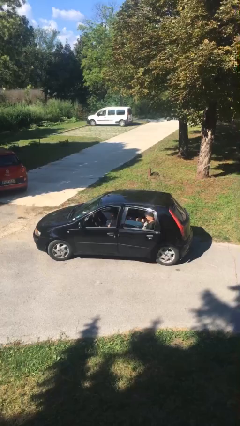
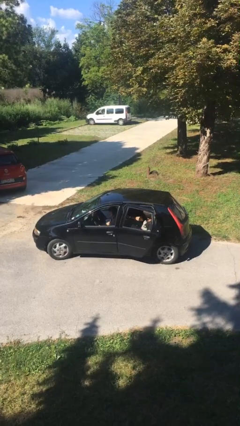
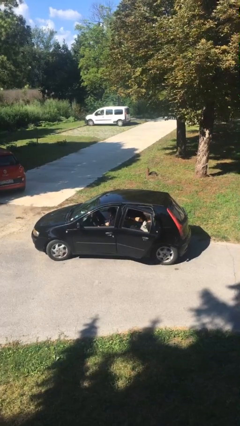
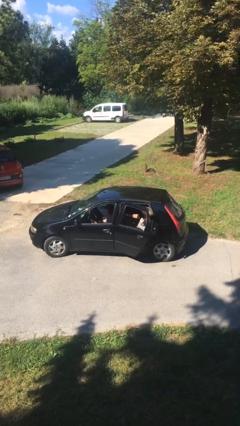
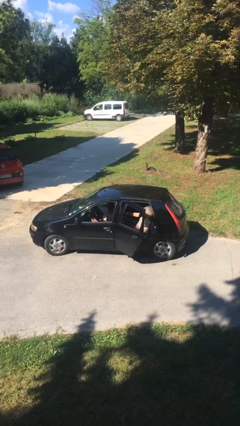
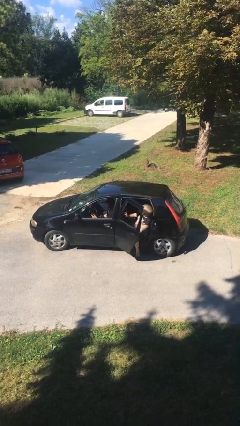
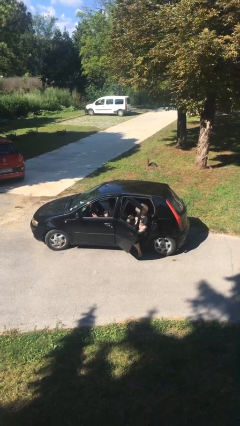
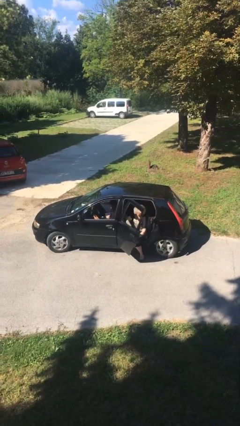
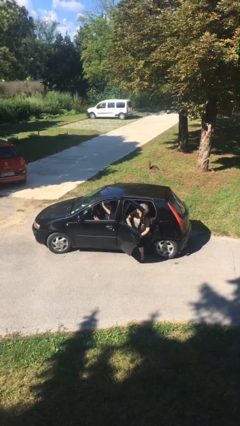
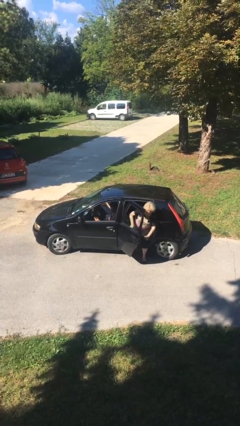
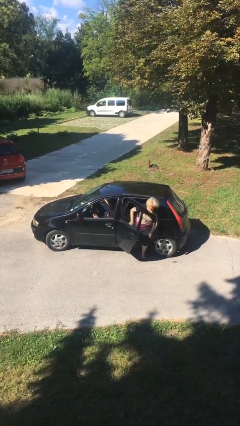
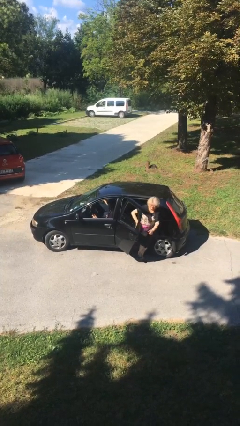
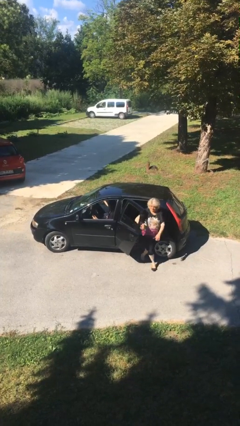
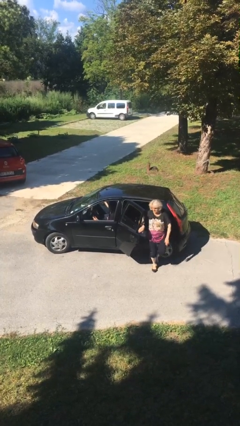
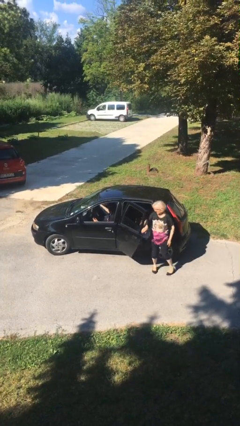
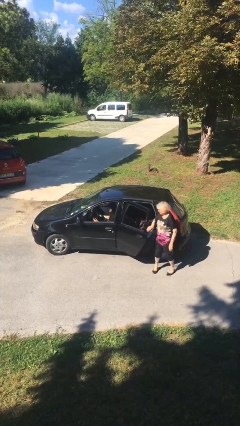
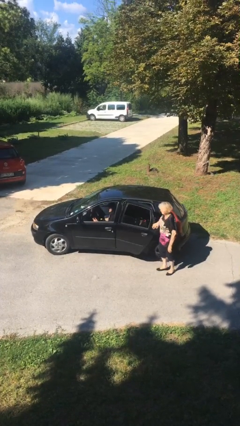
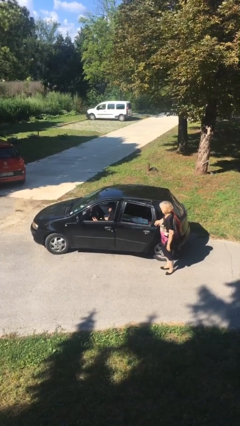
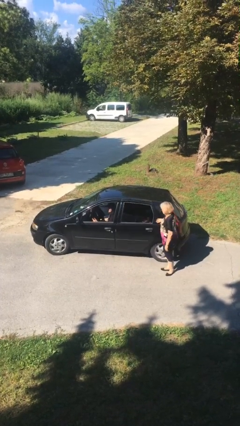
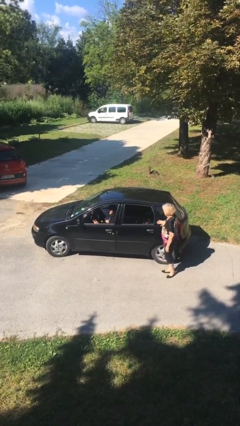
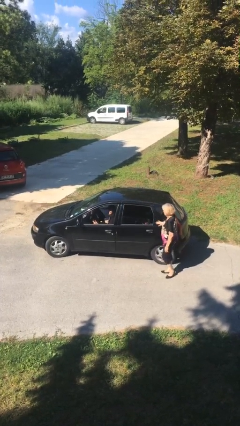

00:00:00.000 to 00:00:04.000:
car drops off person

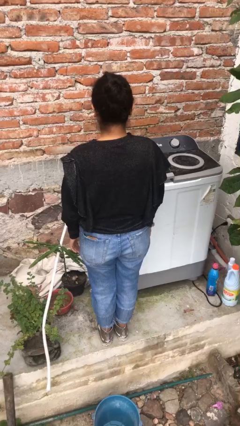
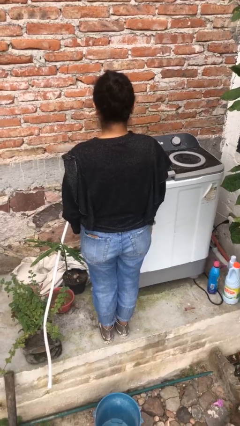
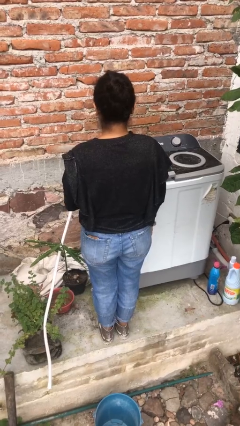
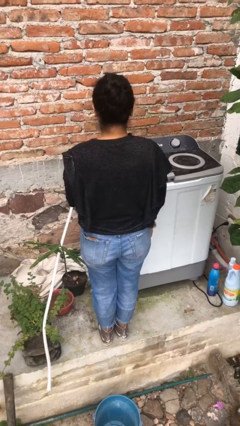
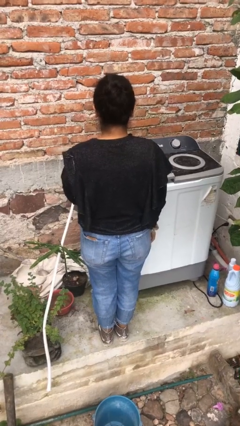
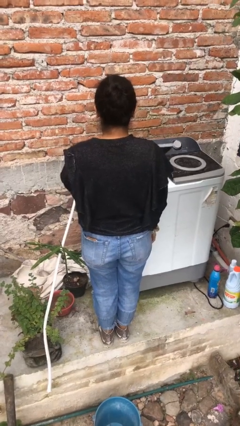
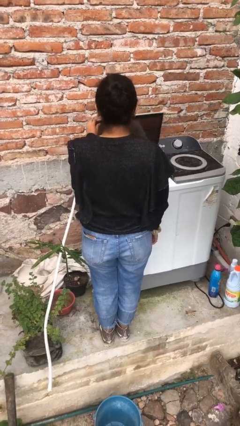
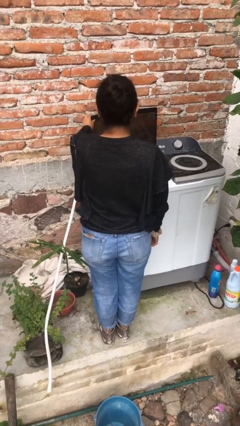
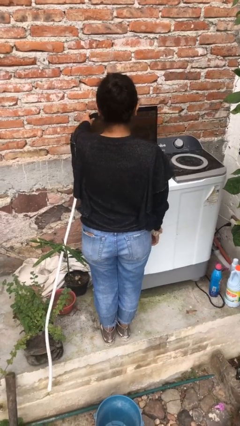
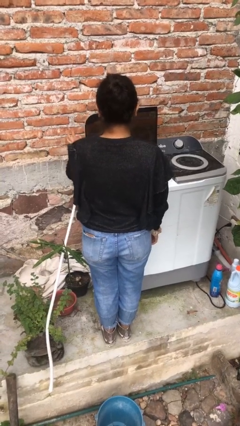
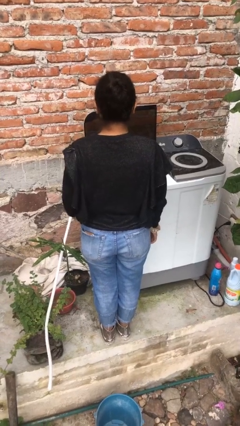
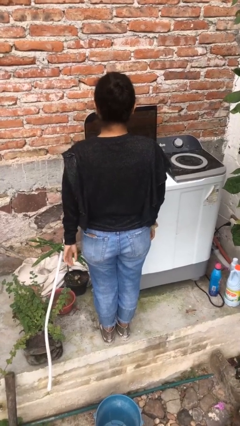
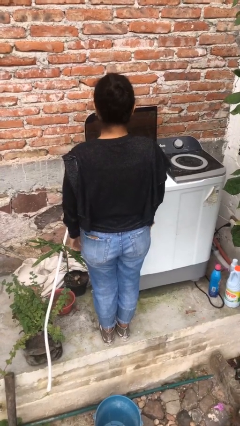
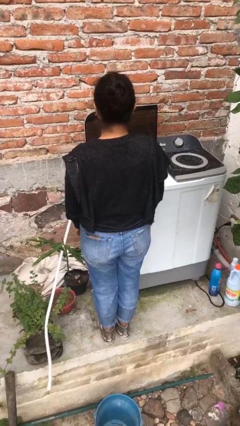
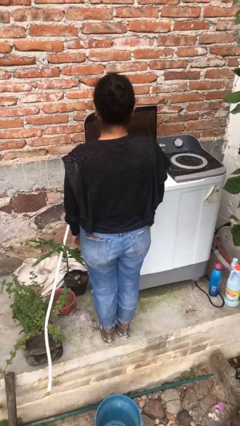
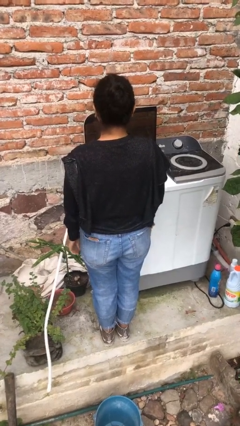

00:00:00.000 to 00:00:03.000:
person opens clothes washer

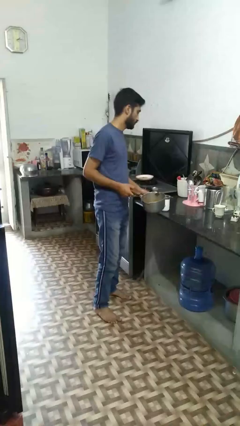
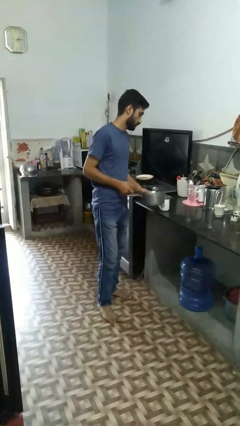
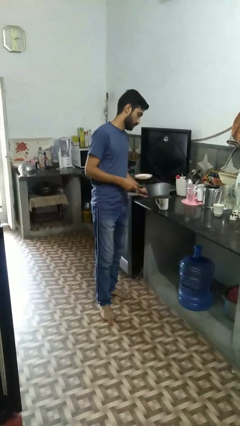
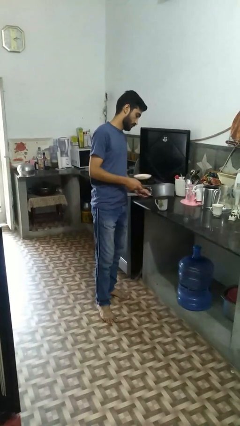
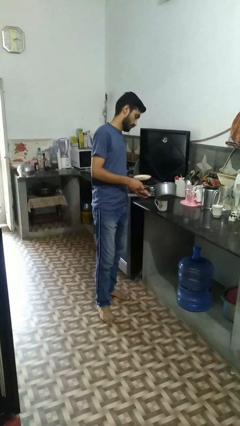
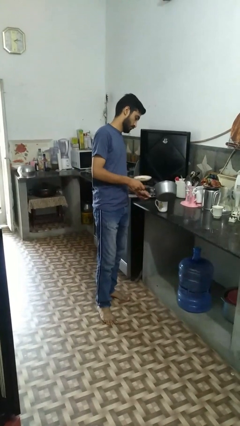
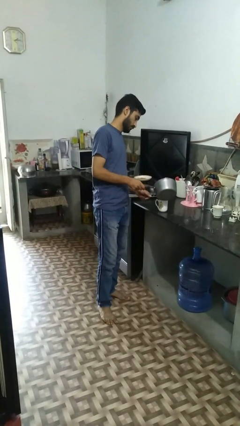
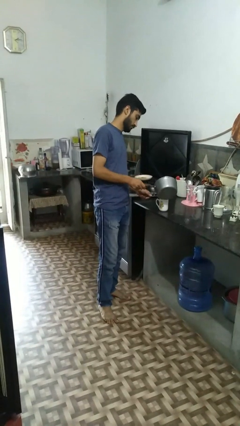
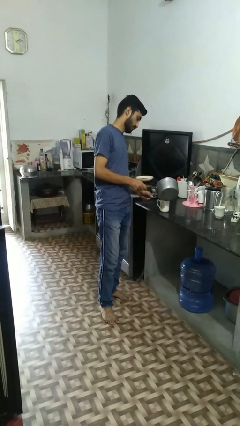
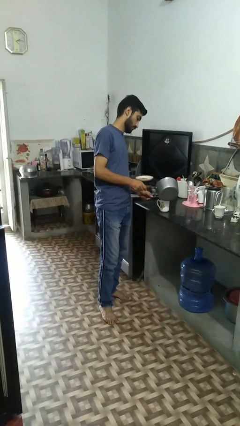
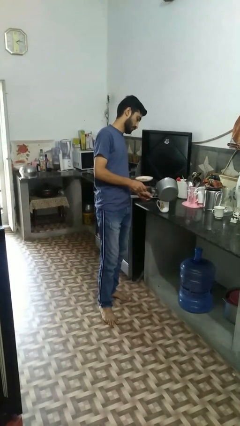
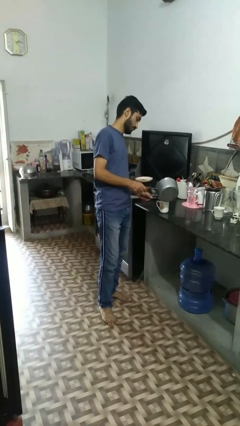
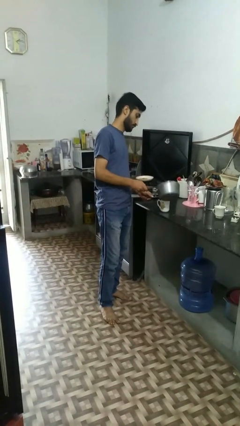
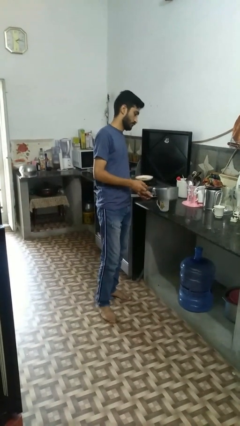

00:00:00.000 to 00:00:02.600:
person pours coffee into mug

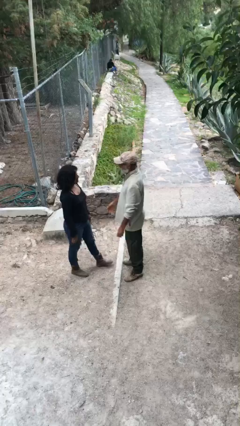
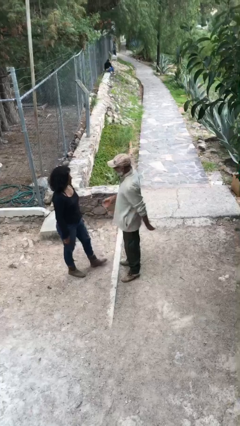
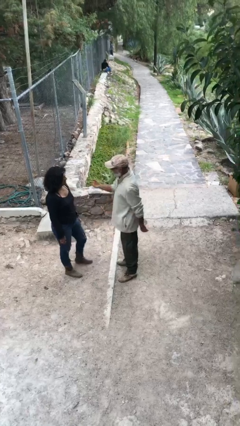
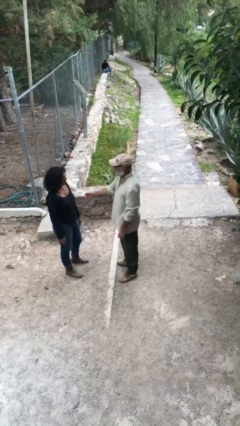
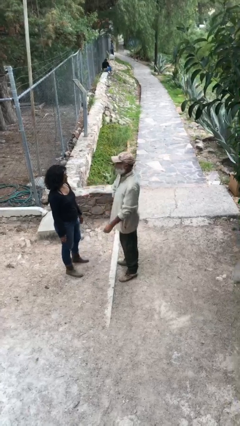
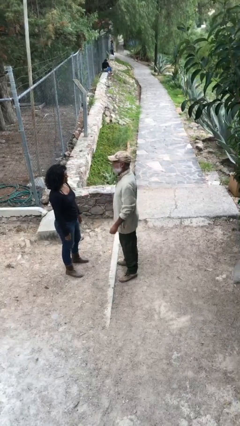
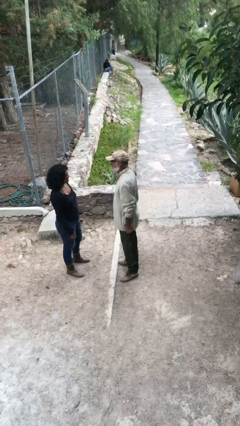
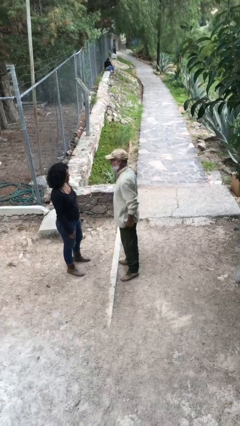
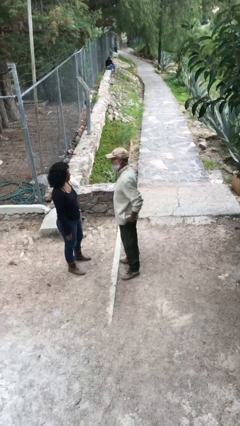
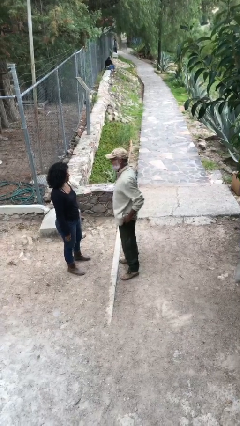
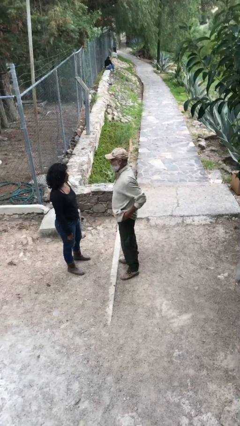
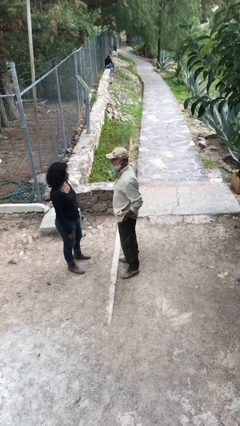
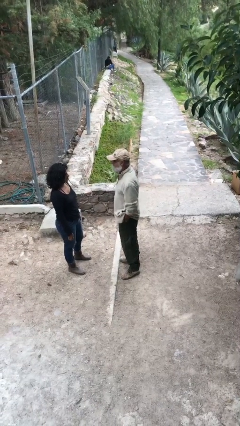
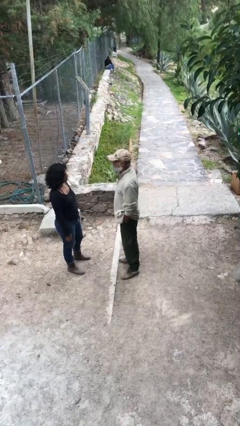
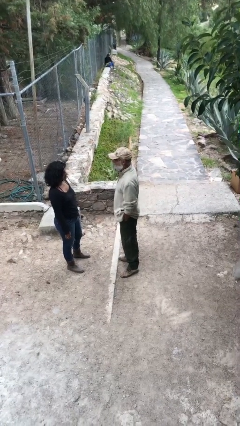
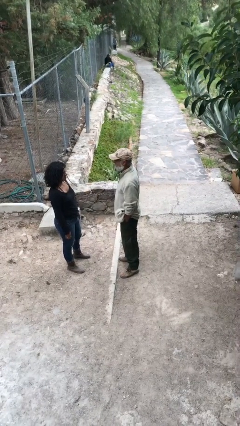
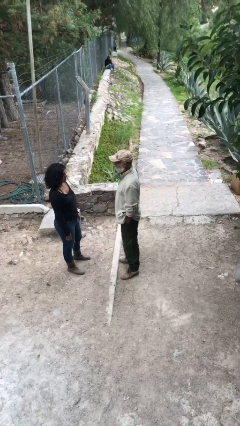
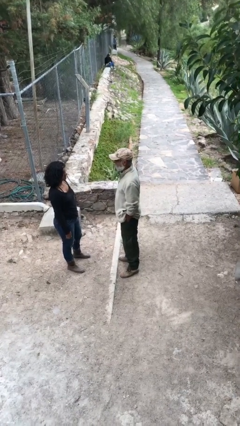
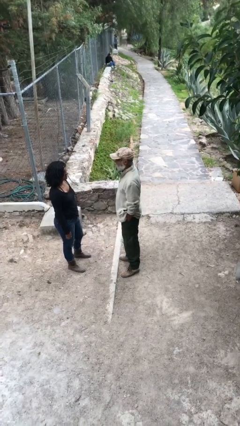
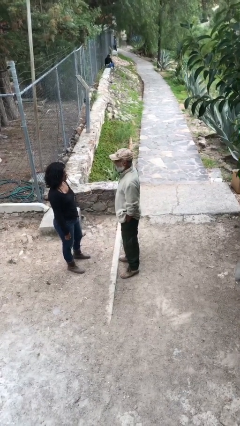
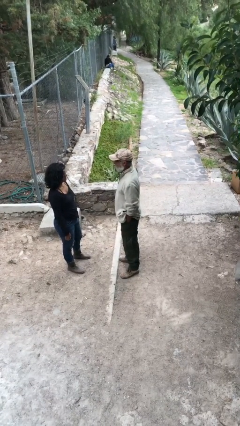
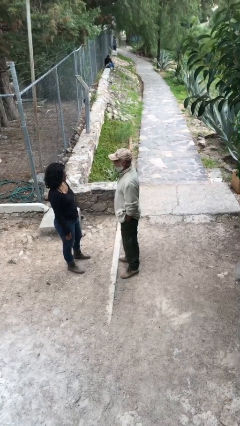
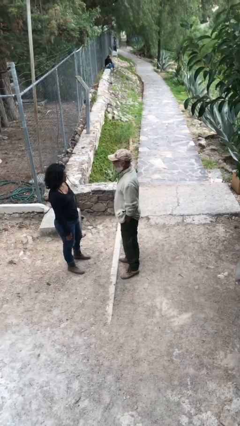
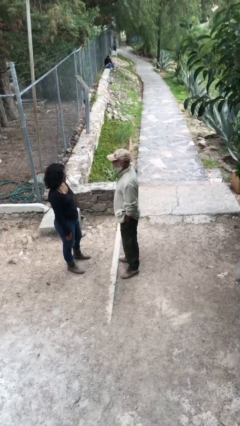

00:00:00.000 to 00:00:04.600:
person talks to person

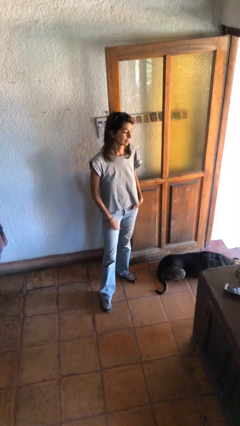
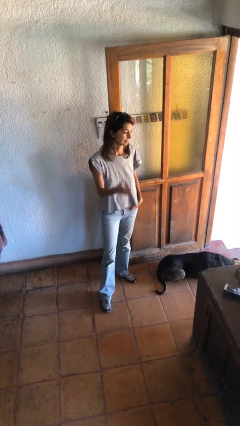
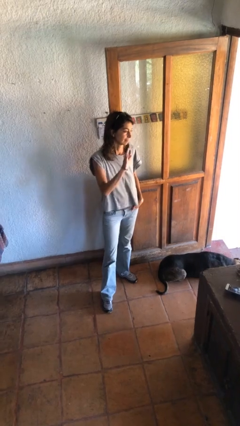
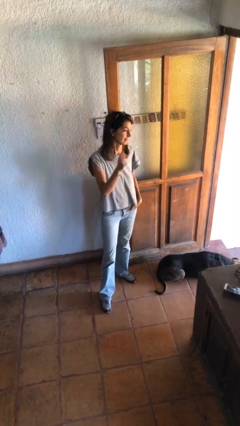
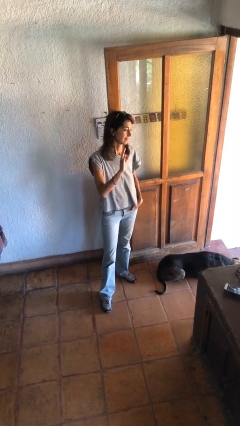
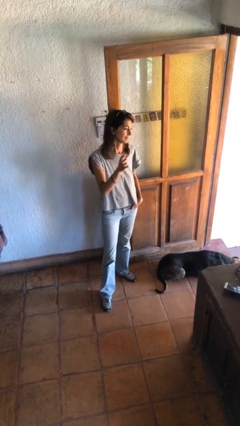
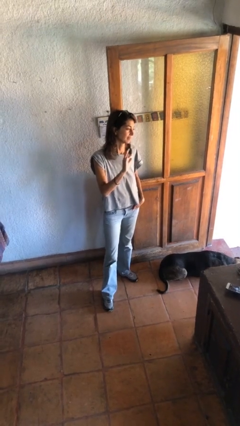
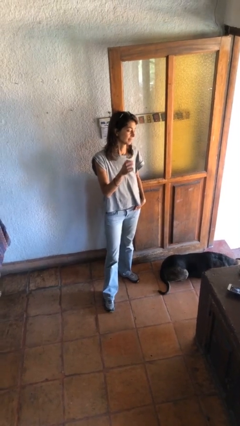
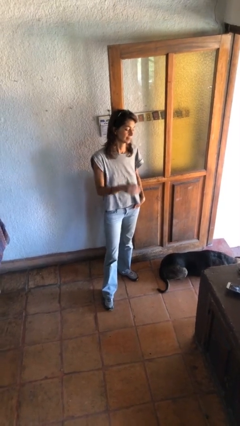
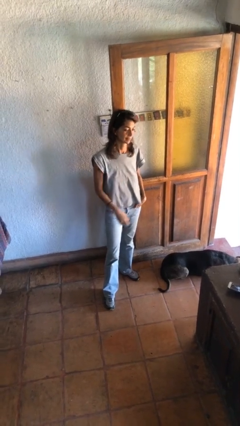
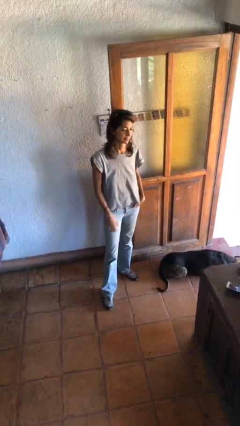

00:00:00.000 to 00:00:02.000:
person waves at person

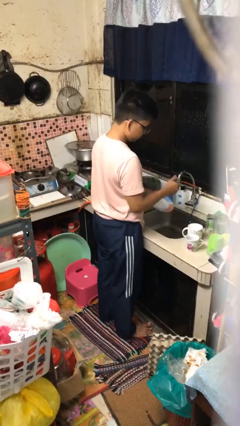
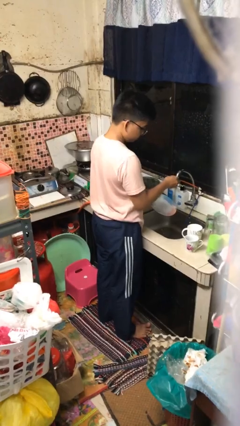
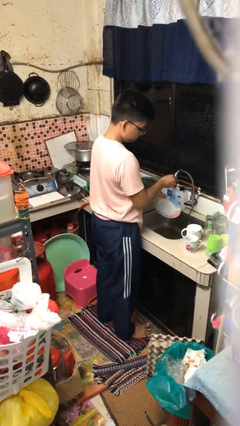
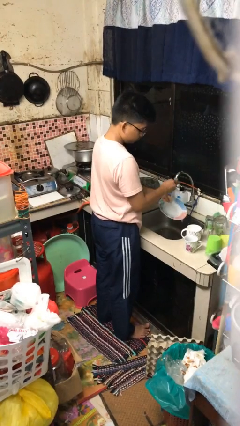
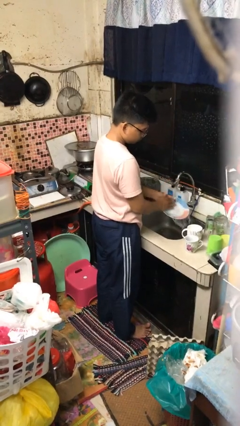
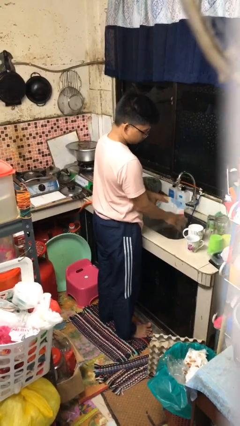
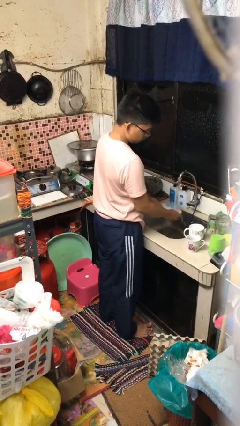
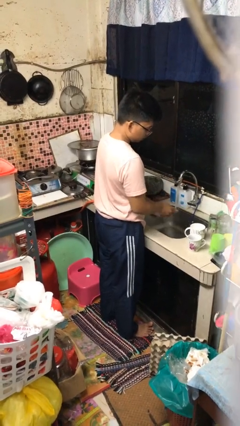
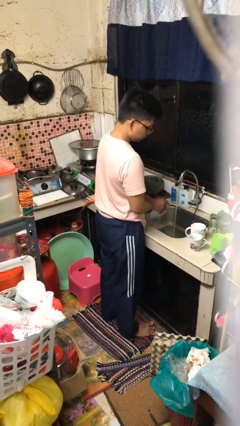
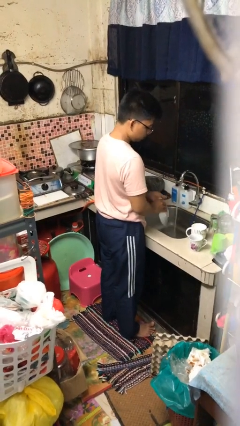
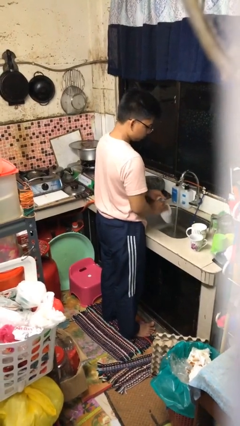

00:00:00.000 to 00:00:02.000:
person washes dish
